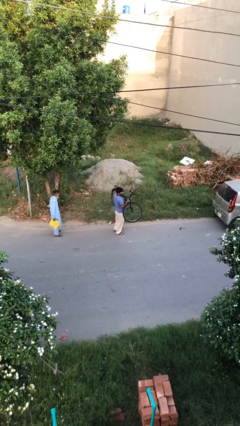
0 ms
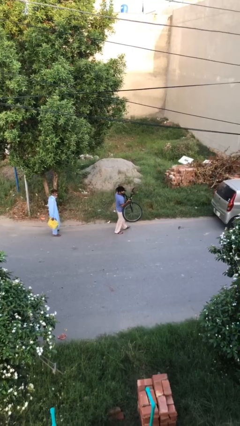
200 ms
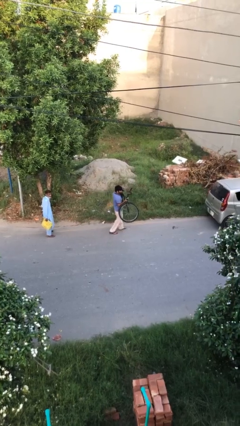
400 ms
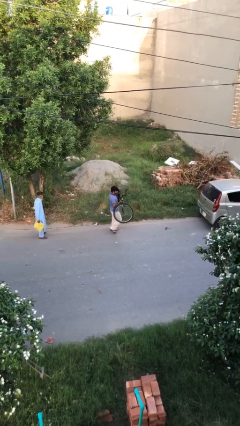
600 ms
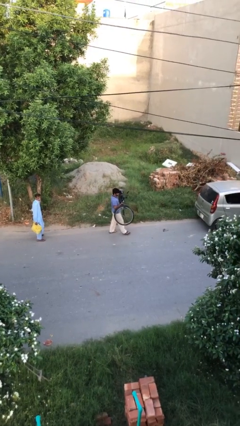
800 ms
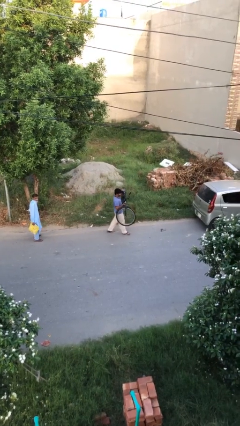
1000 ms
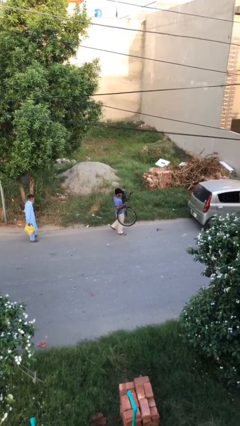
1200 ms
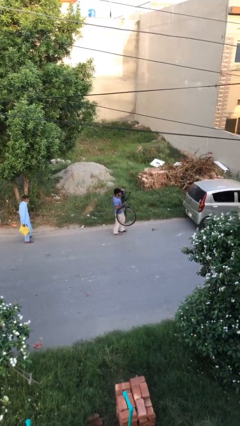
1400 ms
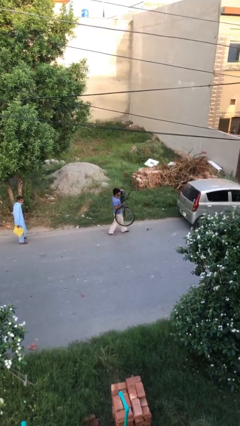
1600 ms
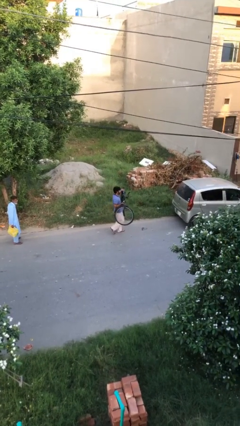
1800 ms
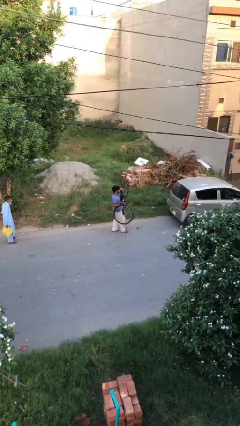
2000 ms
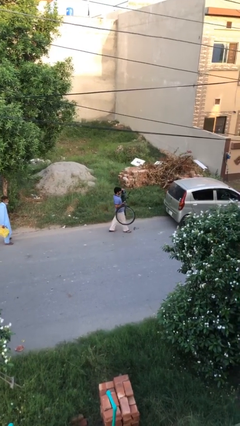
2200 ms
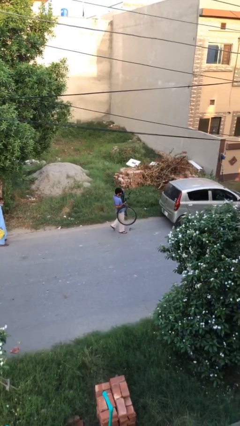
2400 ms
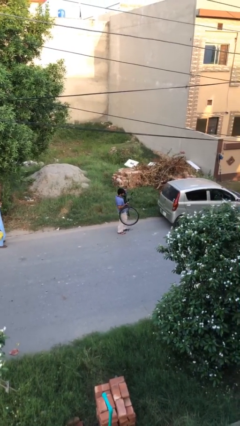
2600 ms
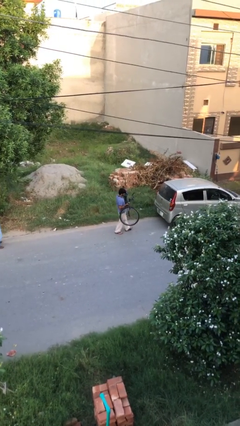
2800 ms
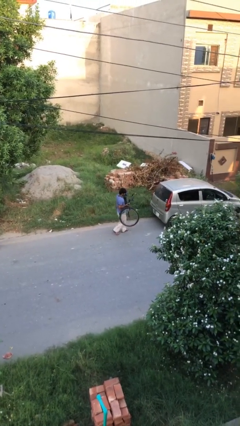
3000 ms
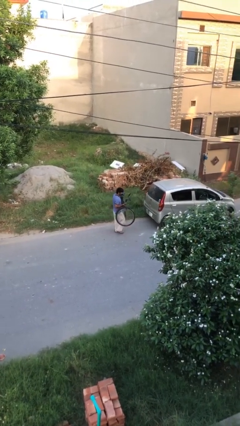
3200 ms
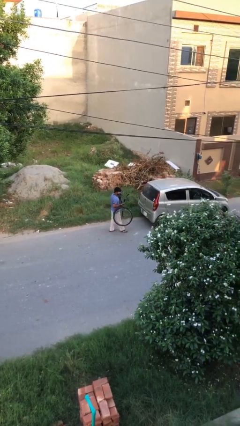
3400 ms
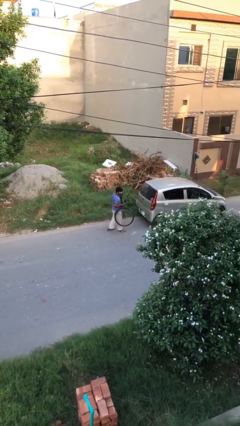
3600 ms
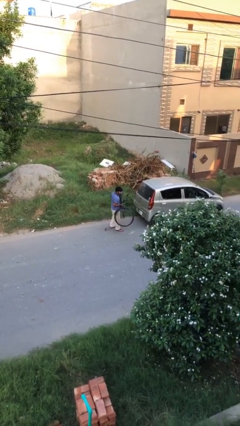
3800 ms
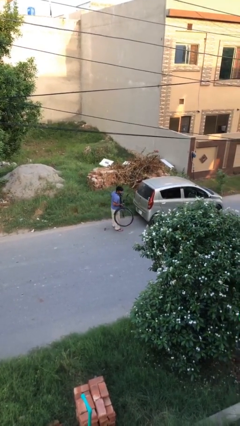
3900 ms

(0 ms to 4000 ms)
person carries heavy object

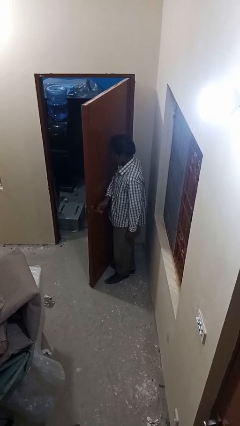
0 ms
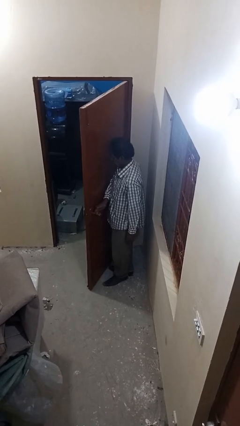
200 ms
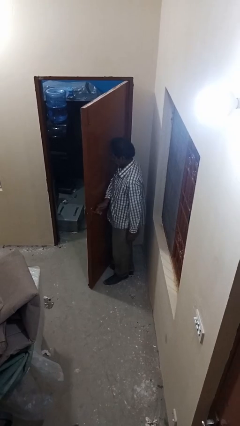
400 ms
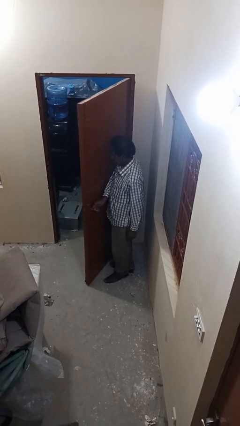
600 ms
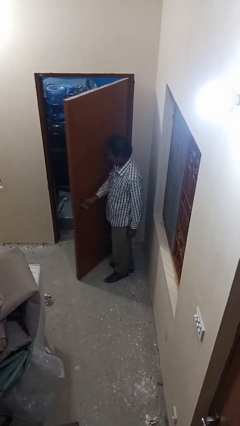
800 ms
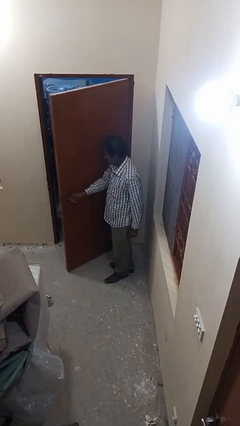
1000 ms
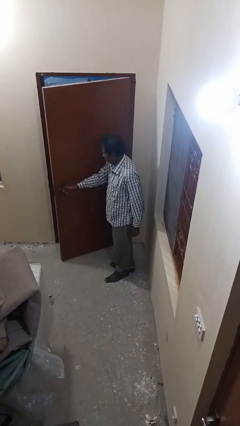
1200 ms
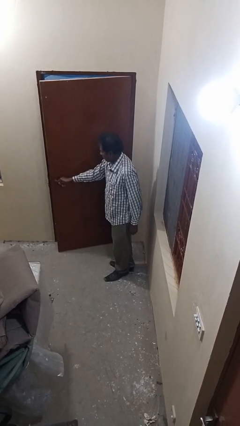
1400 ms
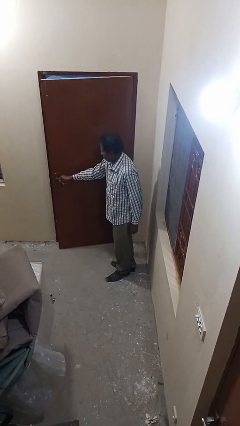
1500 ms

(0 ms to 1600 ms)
person closes facility door

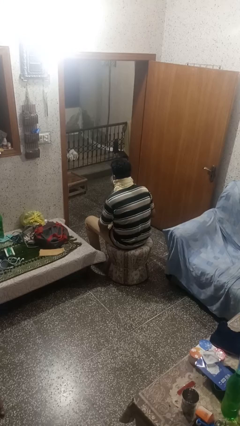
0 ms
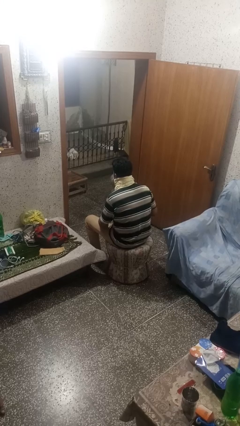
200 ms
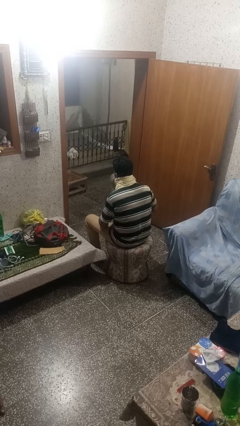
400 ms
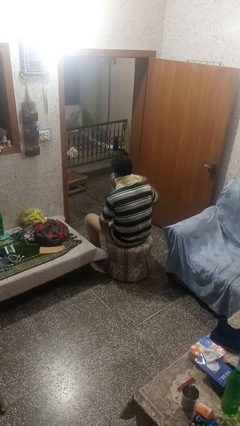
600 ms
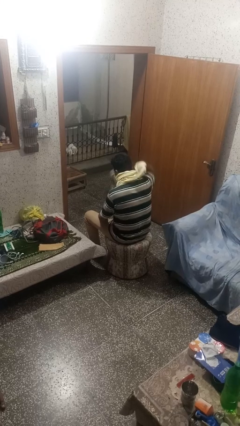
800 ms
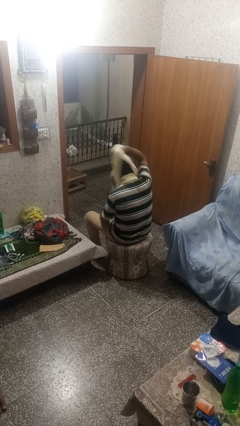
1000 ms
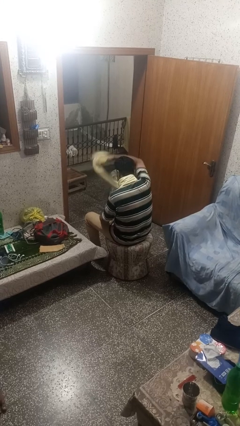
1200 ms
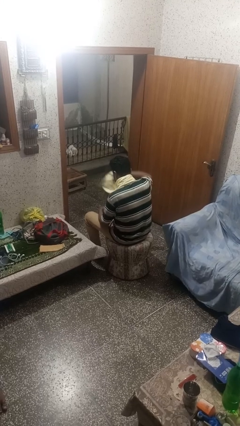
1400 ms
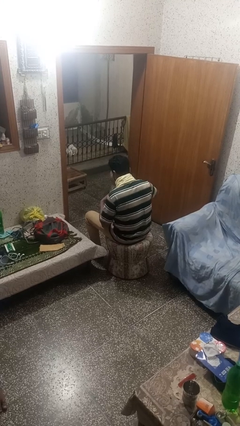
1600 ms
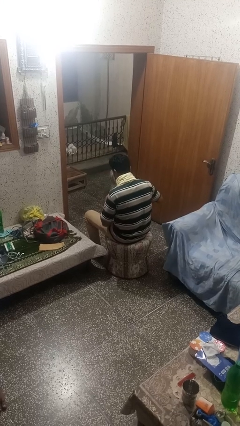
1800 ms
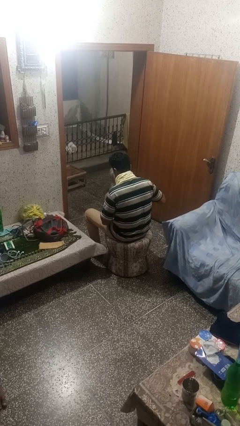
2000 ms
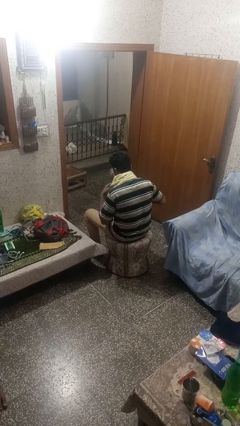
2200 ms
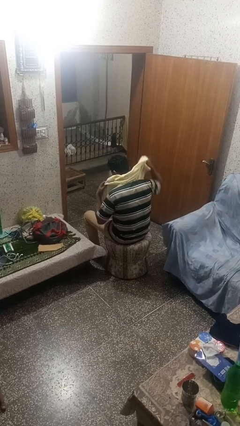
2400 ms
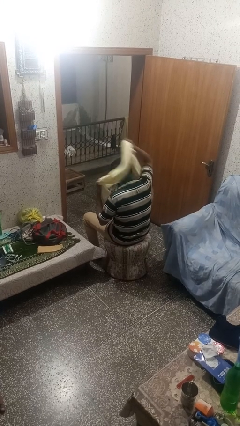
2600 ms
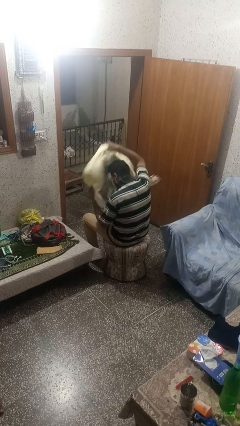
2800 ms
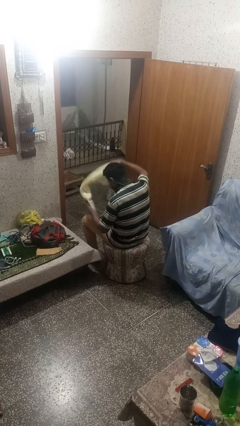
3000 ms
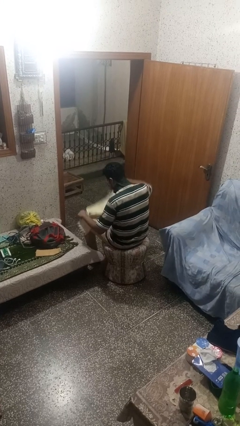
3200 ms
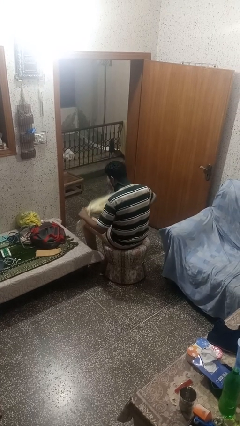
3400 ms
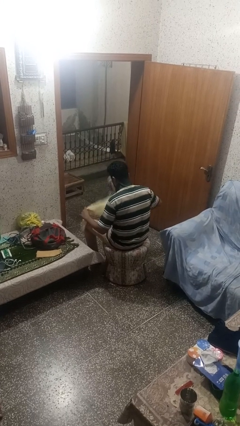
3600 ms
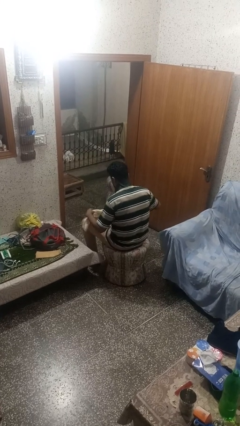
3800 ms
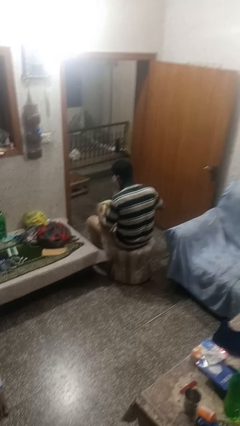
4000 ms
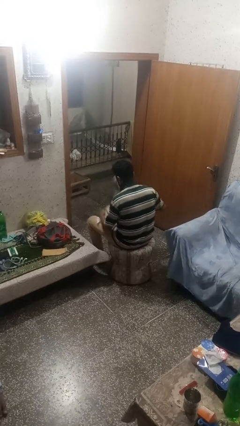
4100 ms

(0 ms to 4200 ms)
person takes off scarf

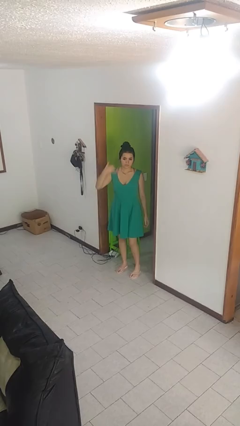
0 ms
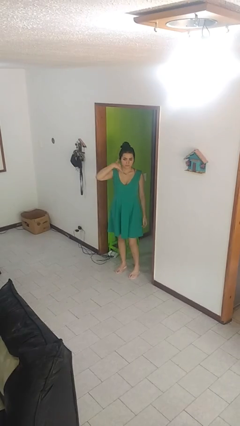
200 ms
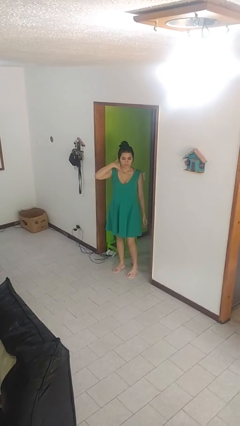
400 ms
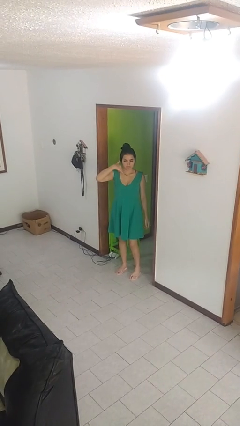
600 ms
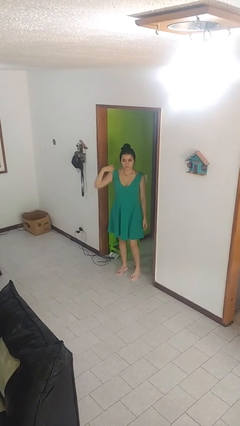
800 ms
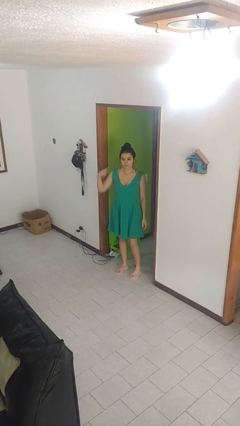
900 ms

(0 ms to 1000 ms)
person gestures call me

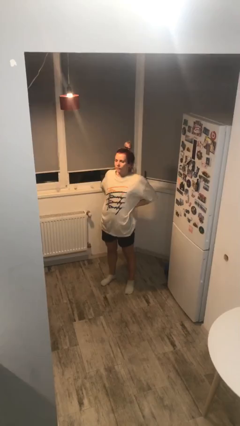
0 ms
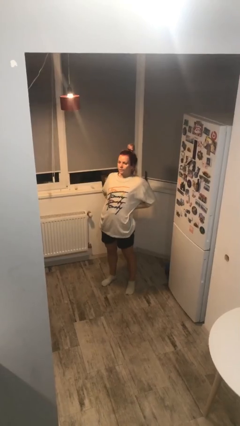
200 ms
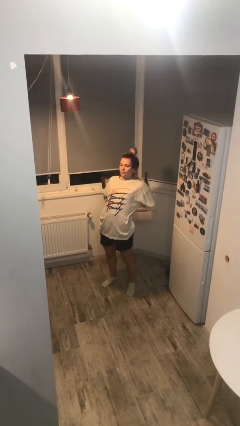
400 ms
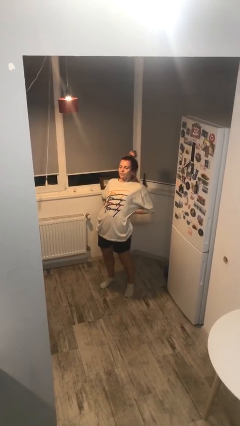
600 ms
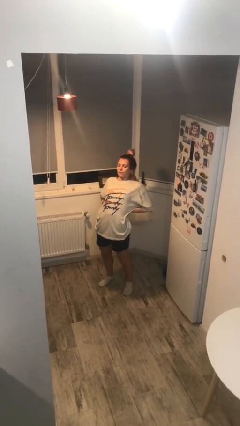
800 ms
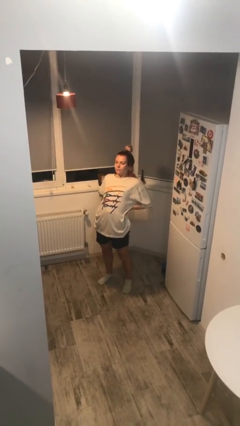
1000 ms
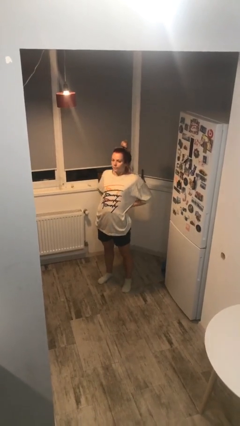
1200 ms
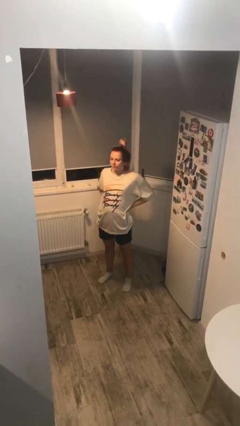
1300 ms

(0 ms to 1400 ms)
person stretches back

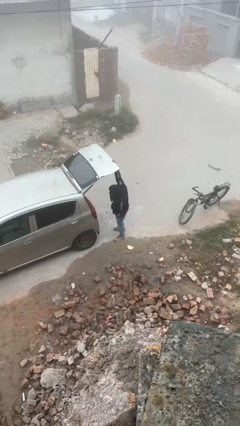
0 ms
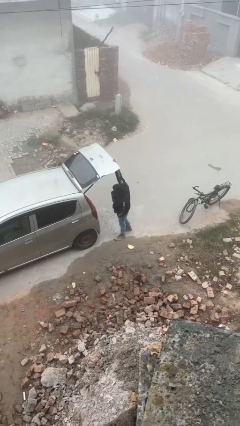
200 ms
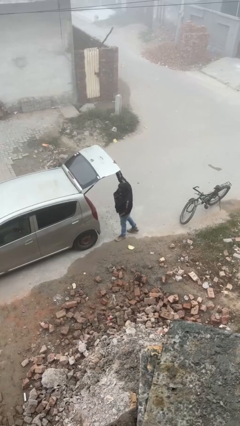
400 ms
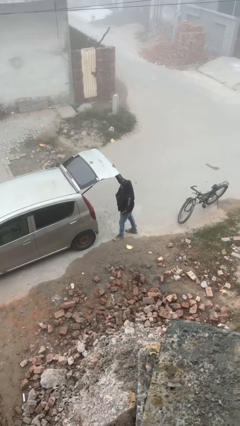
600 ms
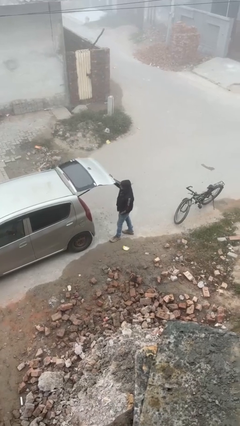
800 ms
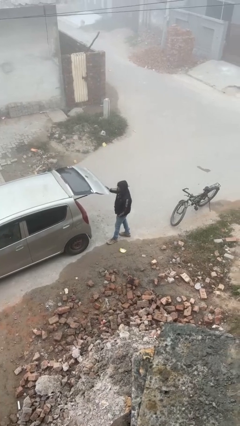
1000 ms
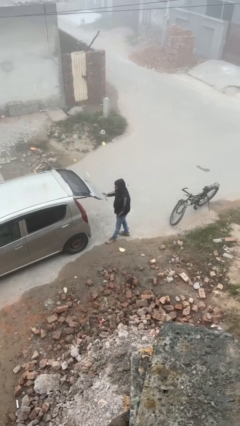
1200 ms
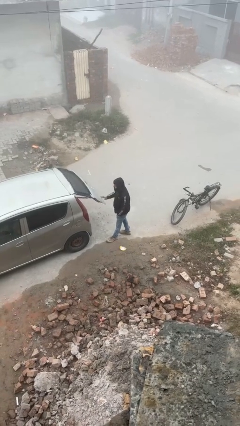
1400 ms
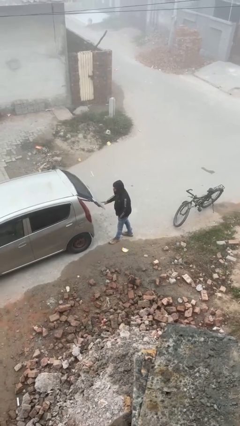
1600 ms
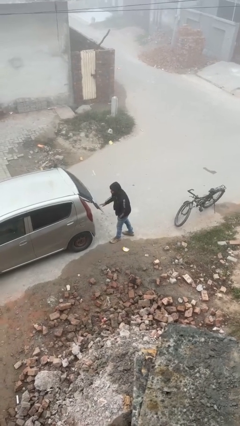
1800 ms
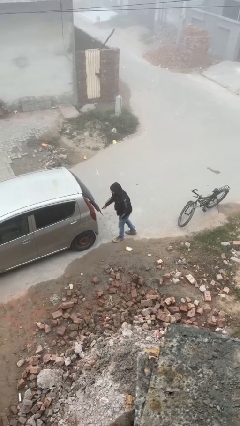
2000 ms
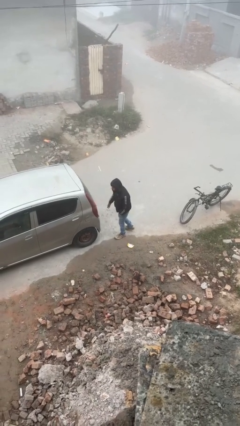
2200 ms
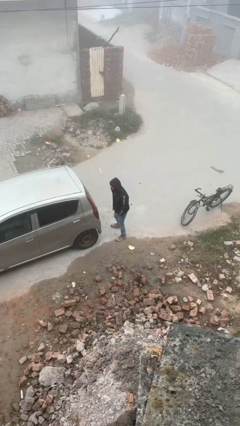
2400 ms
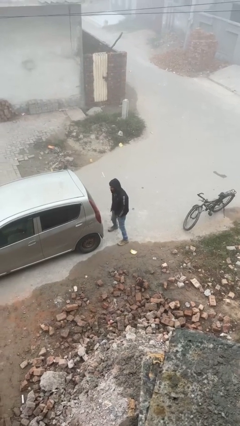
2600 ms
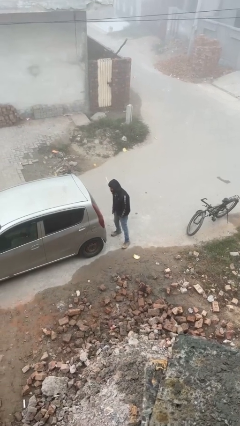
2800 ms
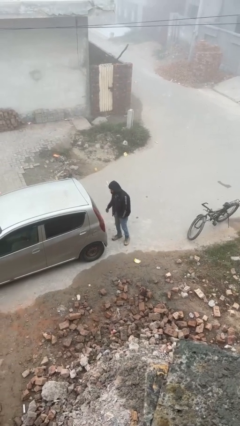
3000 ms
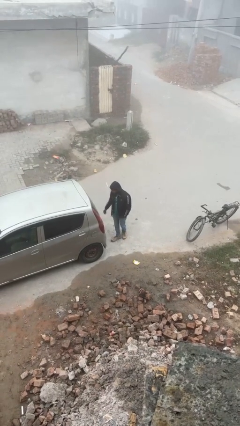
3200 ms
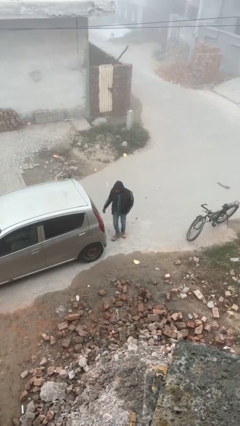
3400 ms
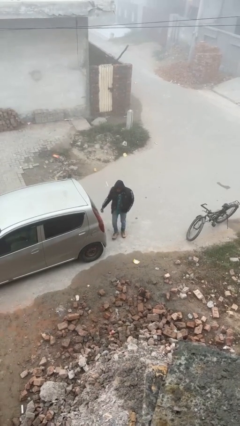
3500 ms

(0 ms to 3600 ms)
person closes car trunk

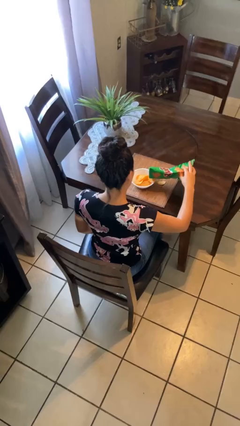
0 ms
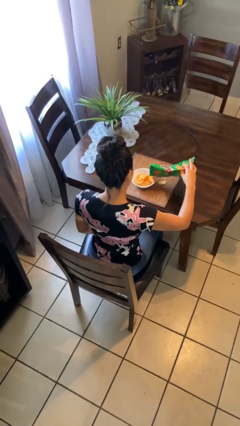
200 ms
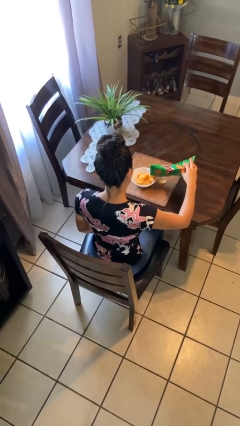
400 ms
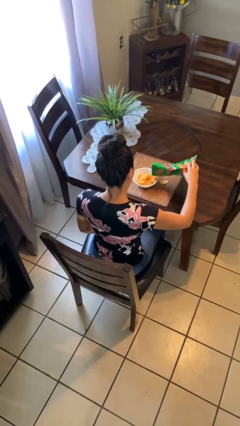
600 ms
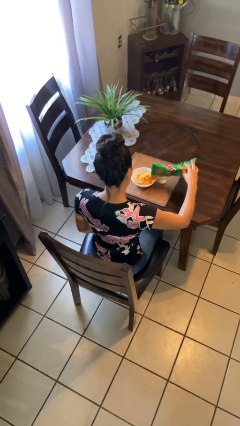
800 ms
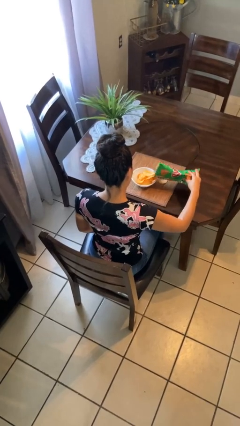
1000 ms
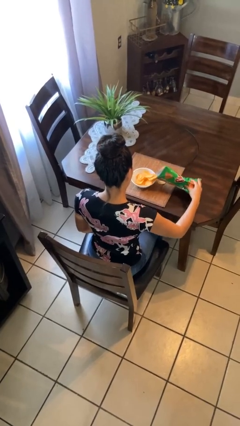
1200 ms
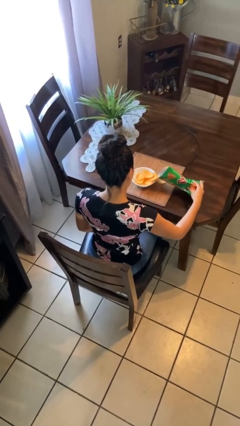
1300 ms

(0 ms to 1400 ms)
person pours into bowl
